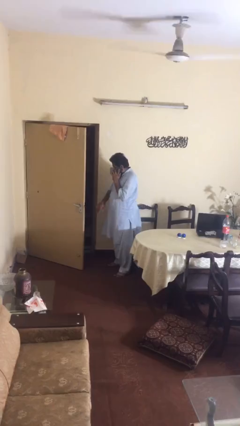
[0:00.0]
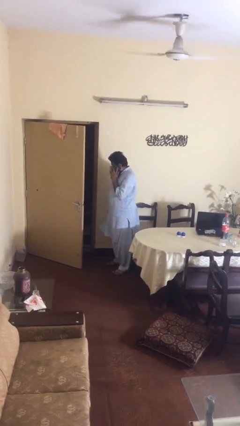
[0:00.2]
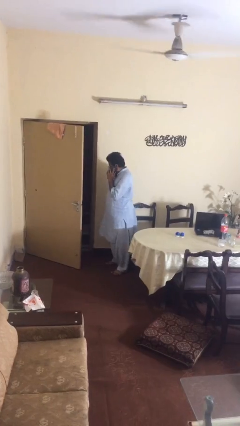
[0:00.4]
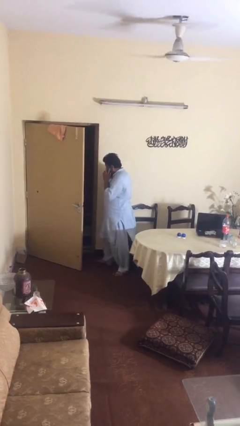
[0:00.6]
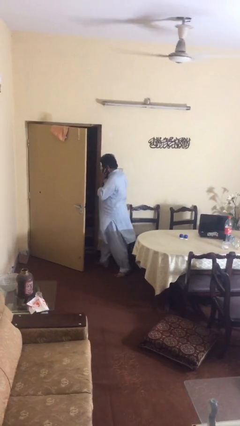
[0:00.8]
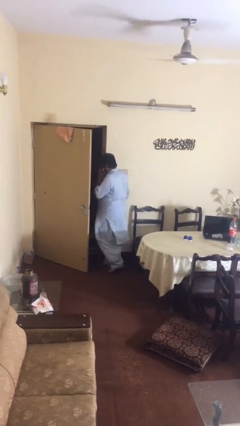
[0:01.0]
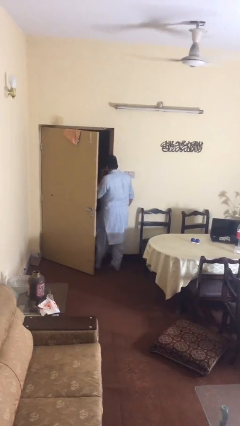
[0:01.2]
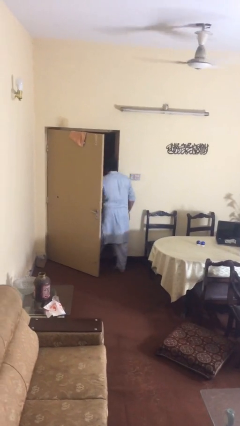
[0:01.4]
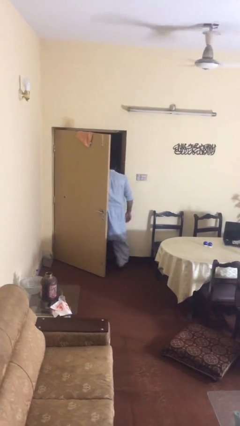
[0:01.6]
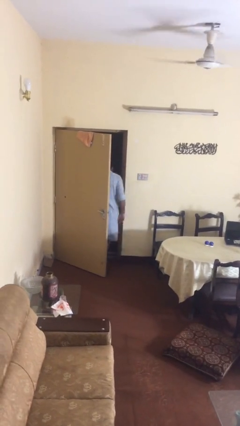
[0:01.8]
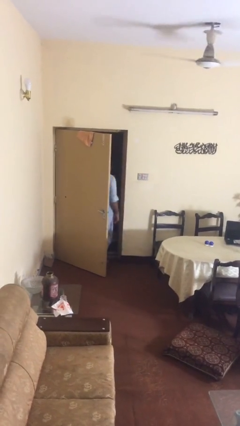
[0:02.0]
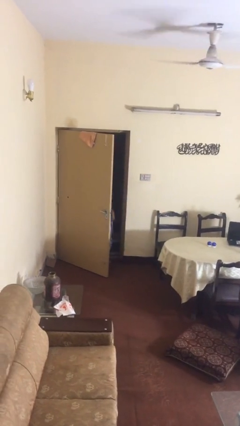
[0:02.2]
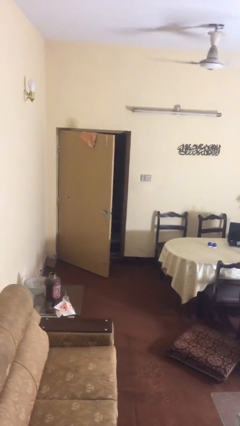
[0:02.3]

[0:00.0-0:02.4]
person exits scene through structure

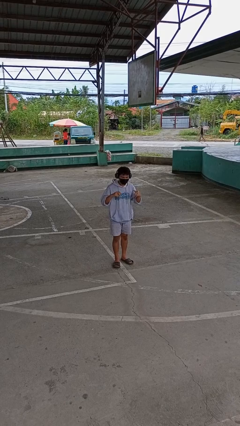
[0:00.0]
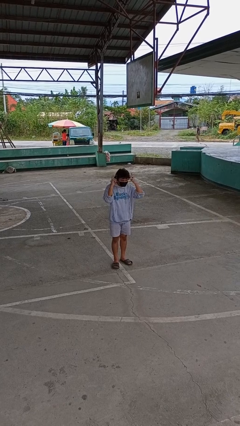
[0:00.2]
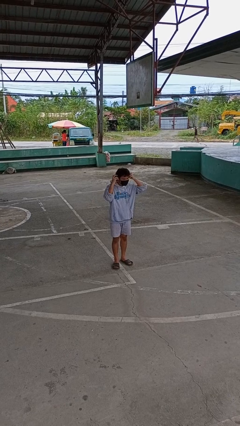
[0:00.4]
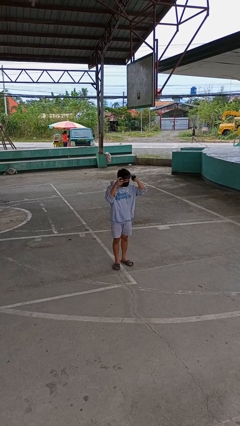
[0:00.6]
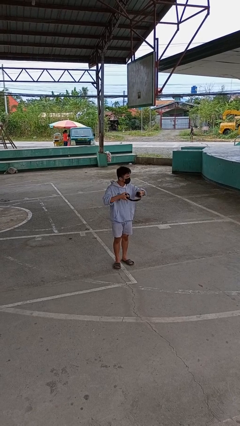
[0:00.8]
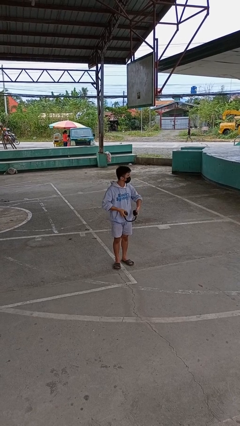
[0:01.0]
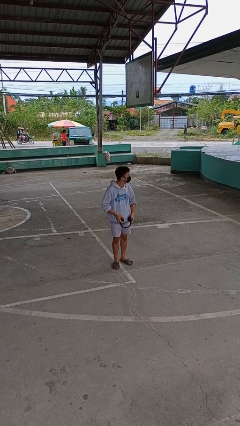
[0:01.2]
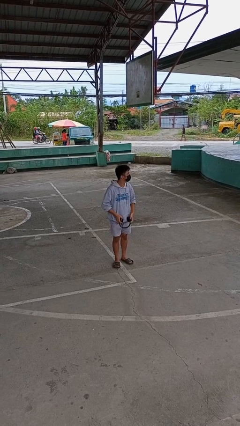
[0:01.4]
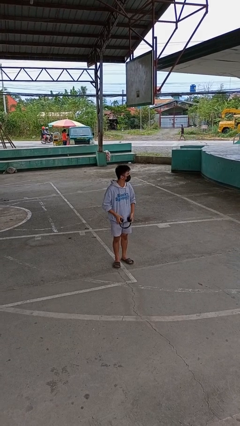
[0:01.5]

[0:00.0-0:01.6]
person takes off headphones

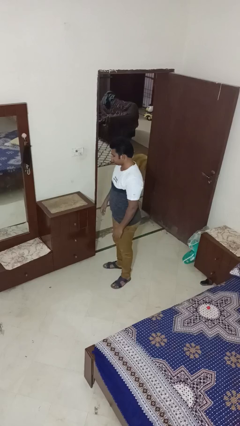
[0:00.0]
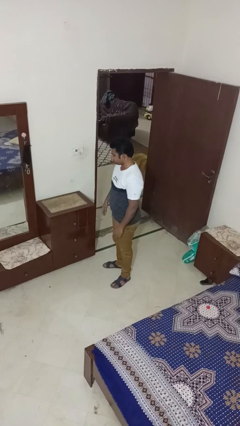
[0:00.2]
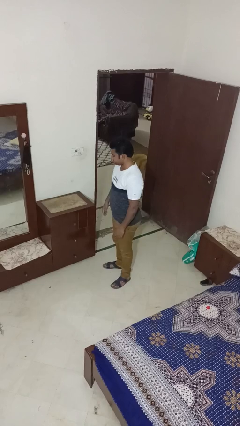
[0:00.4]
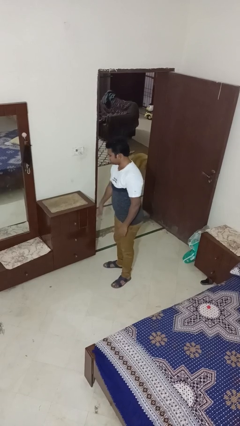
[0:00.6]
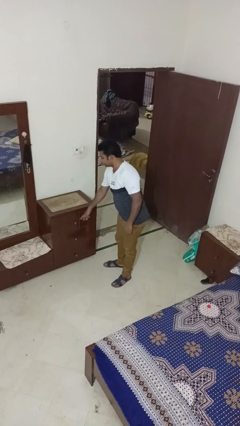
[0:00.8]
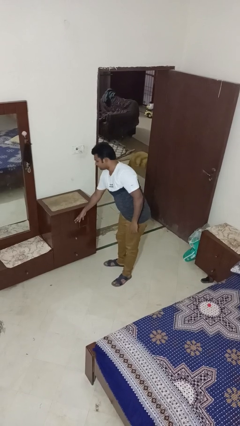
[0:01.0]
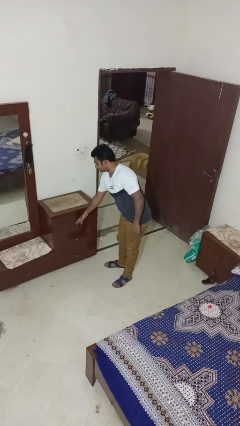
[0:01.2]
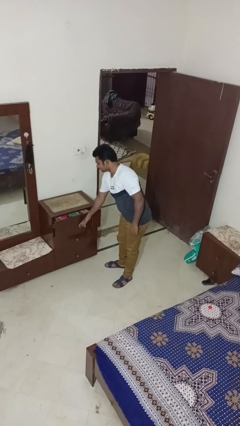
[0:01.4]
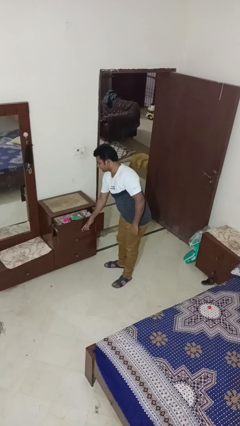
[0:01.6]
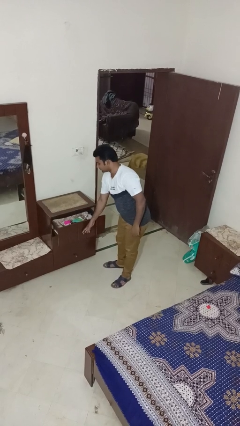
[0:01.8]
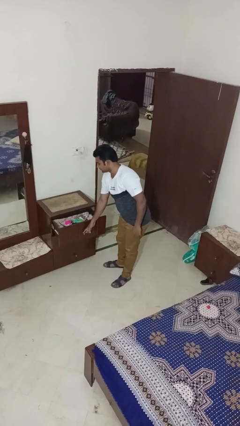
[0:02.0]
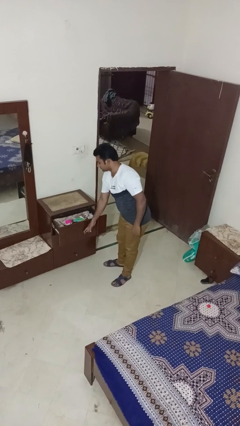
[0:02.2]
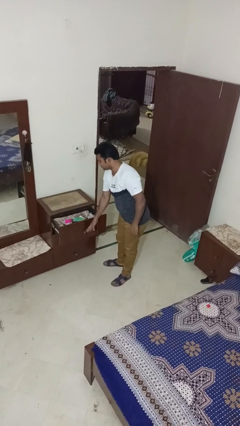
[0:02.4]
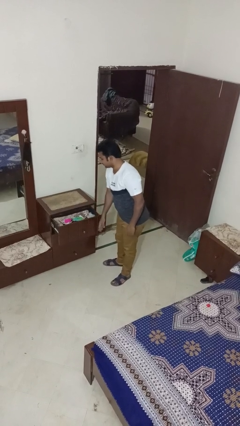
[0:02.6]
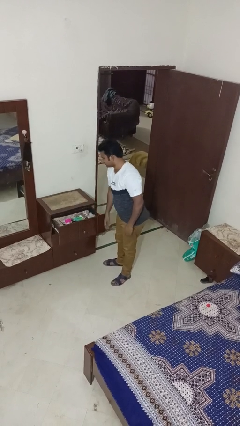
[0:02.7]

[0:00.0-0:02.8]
person opens dresser drawer

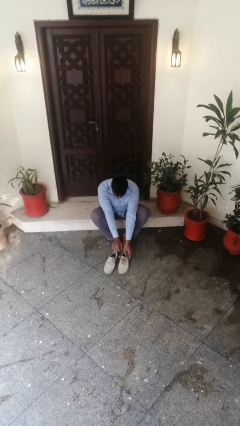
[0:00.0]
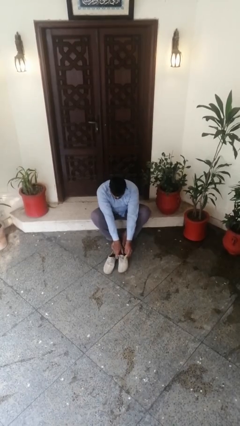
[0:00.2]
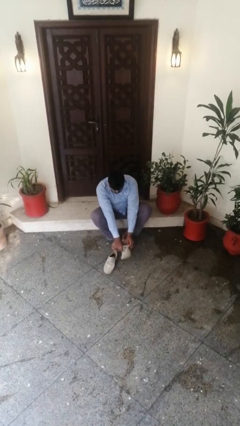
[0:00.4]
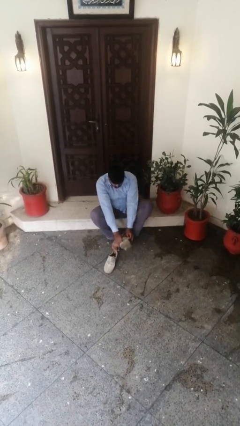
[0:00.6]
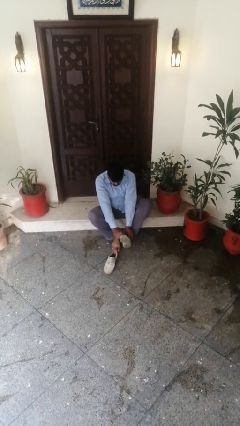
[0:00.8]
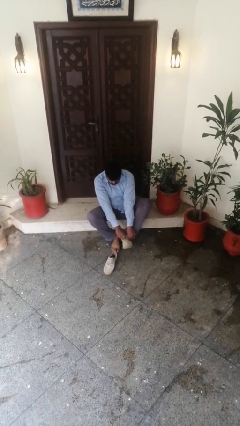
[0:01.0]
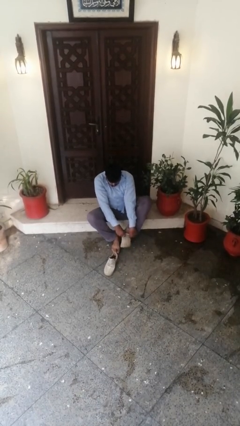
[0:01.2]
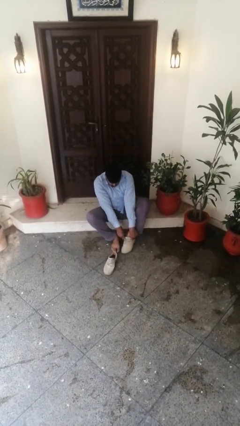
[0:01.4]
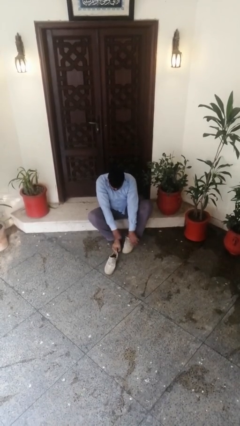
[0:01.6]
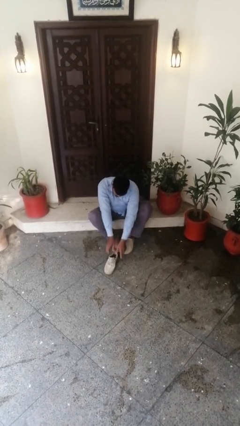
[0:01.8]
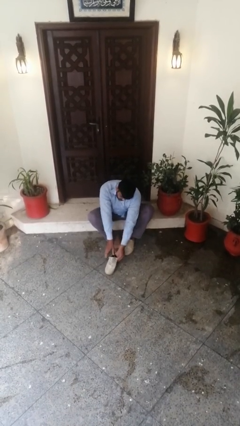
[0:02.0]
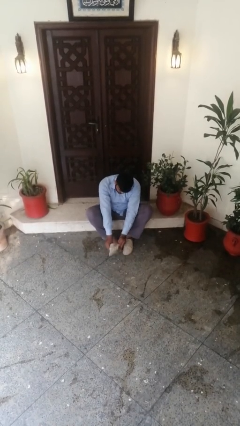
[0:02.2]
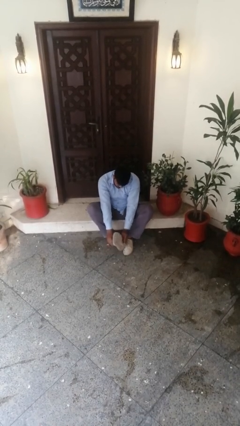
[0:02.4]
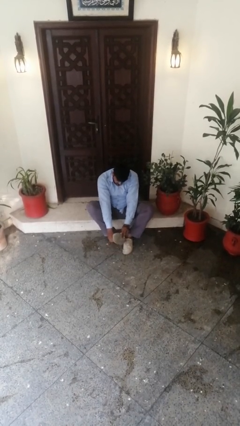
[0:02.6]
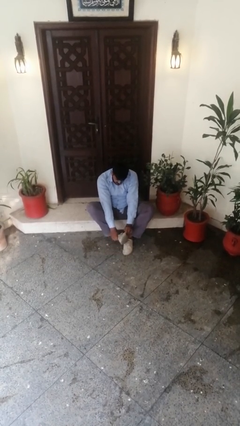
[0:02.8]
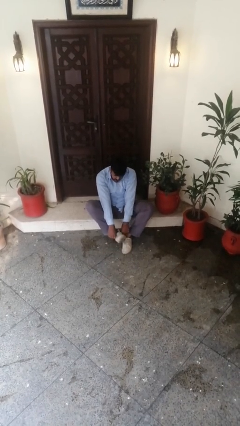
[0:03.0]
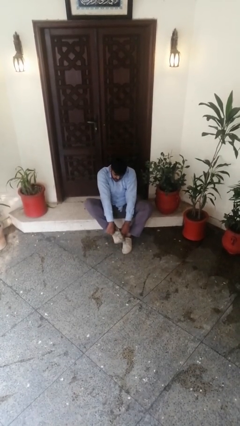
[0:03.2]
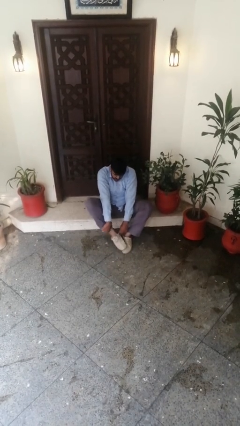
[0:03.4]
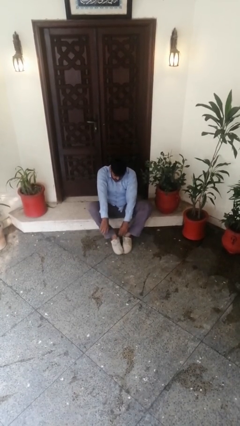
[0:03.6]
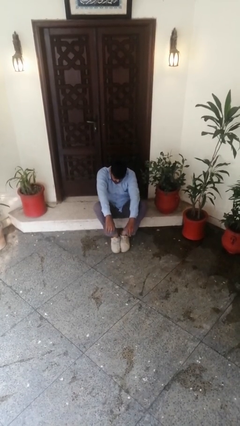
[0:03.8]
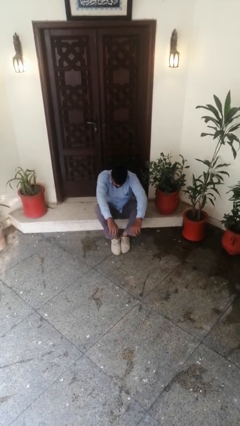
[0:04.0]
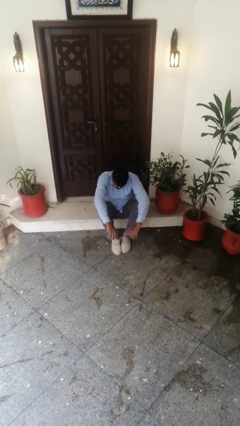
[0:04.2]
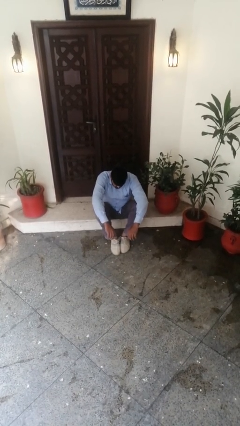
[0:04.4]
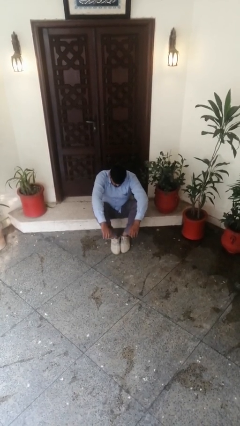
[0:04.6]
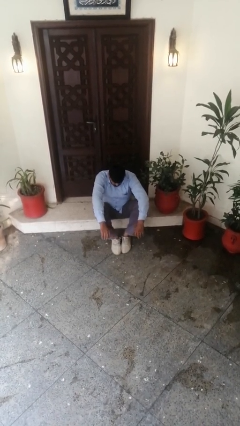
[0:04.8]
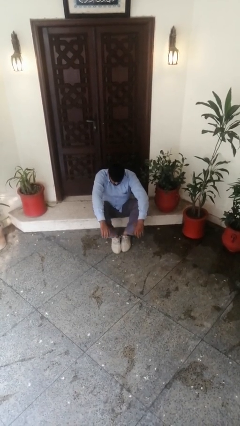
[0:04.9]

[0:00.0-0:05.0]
person puts on shoes

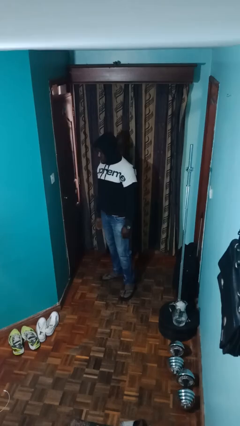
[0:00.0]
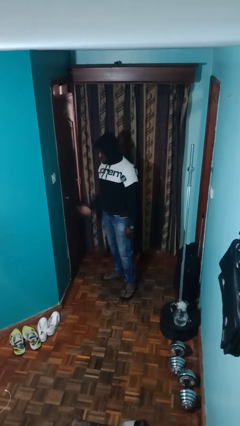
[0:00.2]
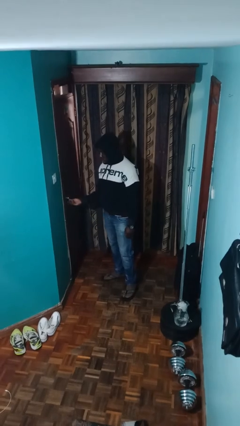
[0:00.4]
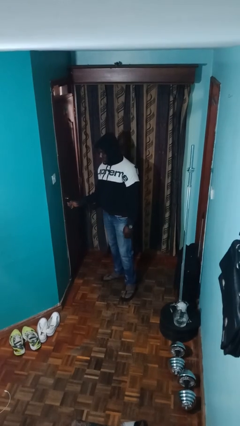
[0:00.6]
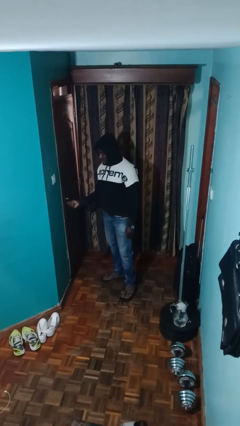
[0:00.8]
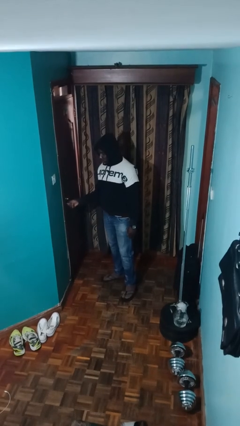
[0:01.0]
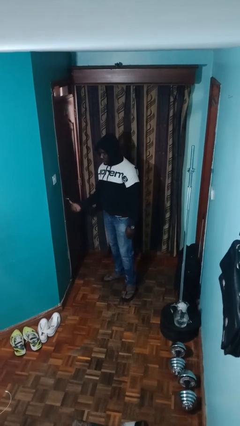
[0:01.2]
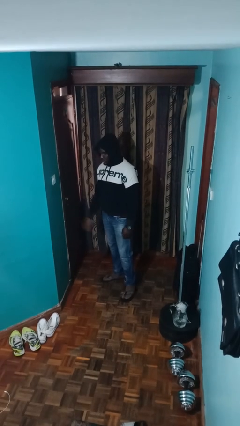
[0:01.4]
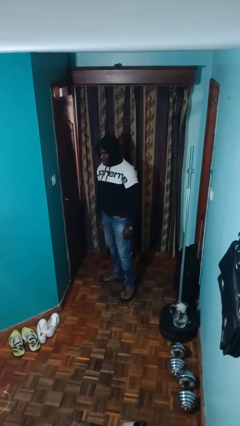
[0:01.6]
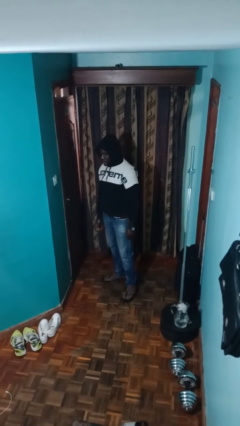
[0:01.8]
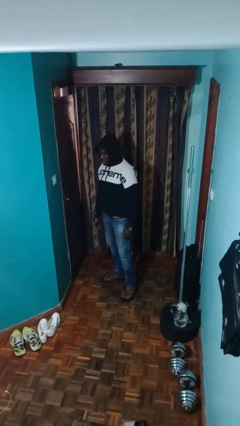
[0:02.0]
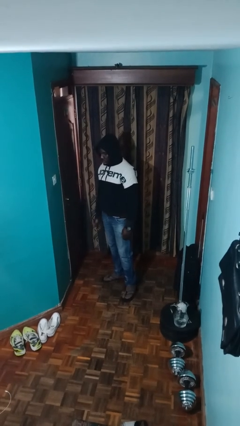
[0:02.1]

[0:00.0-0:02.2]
person locks door with keys

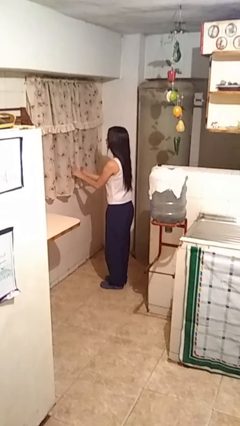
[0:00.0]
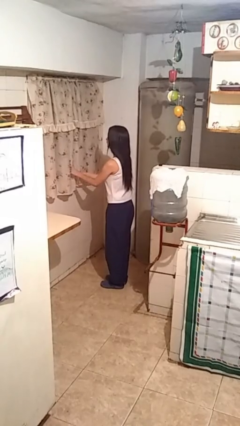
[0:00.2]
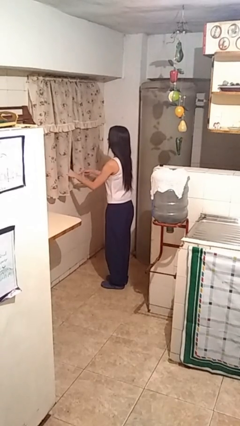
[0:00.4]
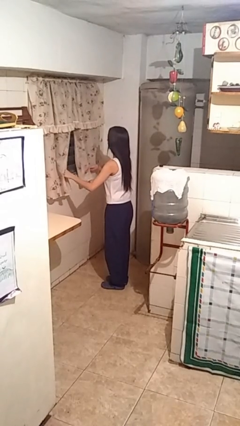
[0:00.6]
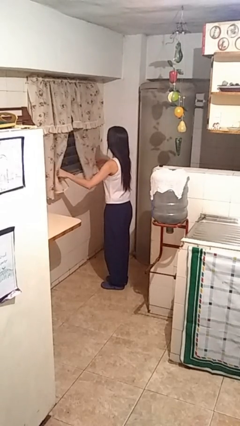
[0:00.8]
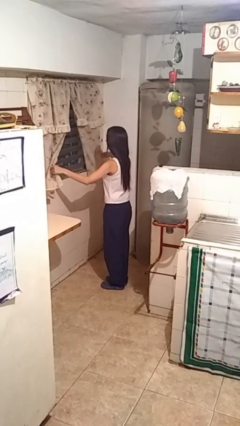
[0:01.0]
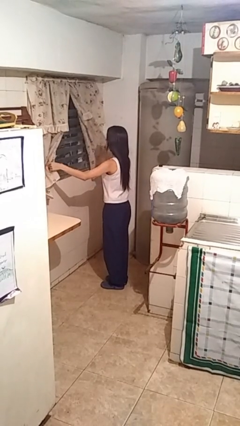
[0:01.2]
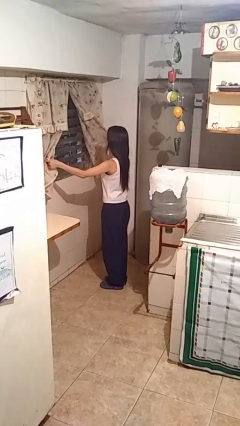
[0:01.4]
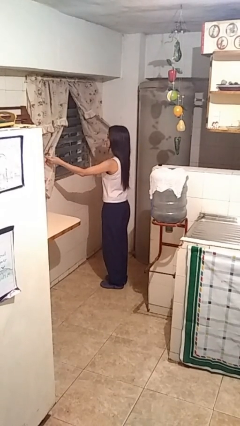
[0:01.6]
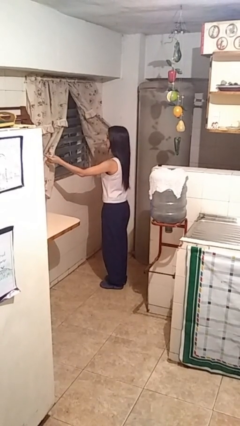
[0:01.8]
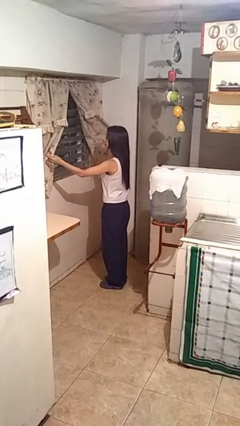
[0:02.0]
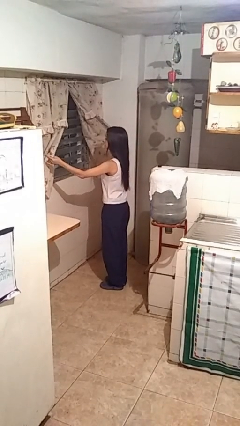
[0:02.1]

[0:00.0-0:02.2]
person opens curtains

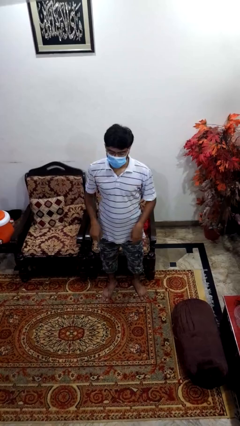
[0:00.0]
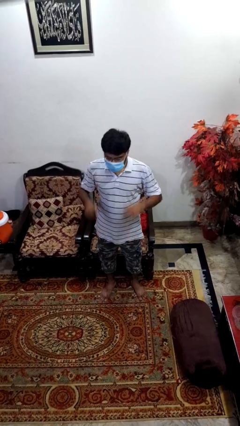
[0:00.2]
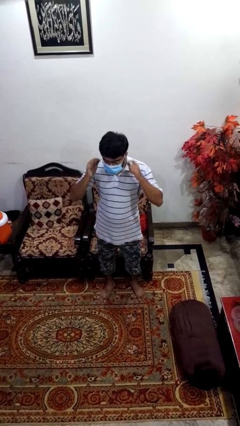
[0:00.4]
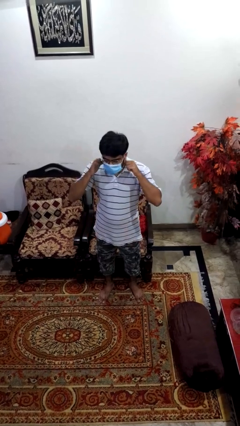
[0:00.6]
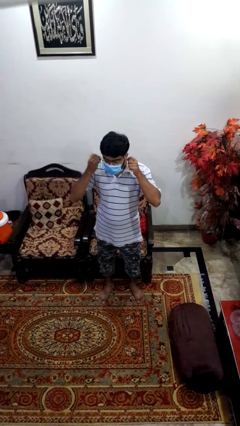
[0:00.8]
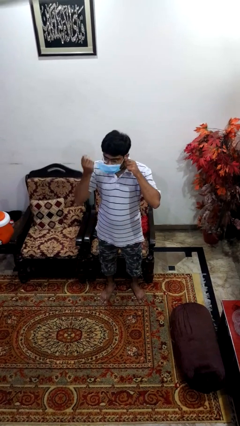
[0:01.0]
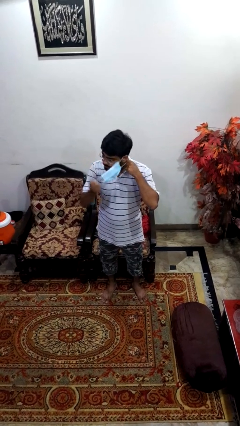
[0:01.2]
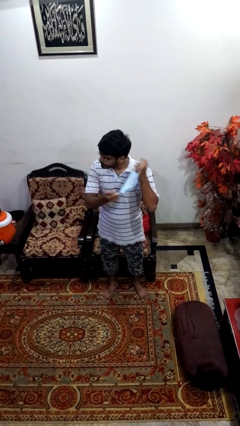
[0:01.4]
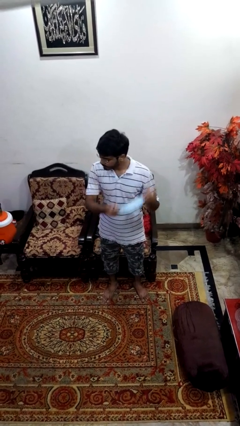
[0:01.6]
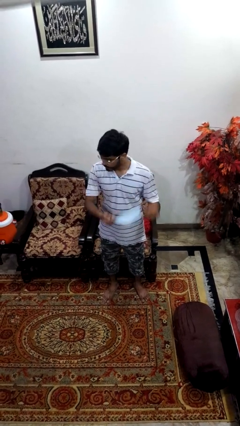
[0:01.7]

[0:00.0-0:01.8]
person takes off facemask
